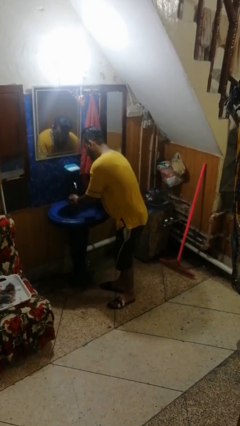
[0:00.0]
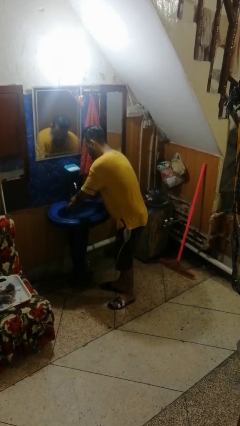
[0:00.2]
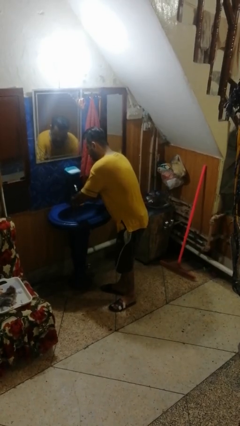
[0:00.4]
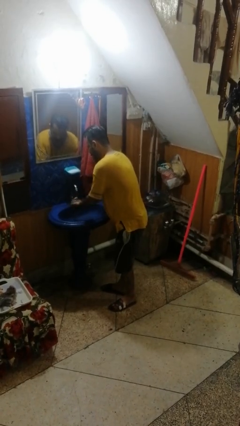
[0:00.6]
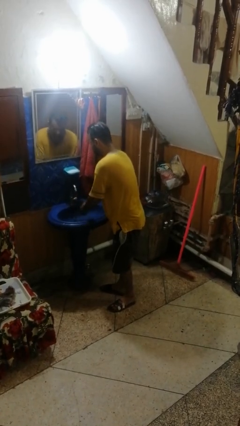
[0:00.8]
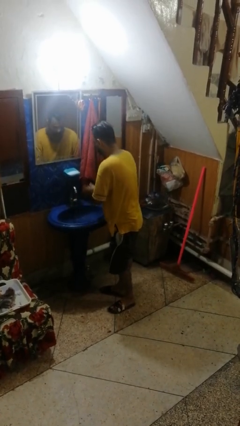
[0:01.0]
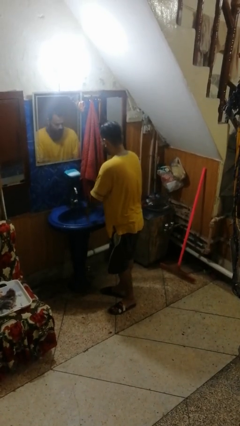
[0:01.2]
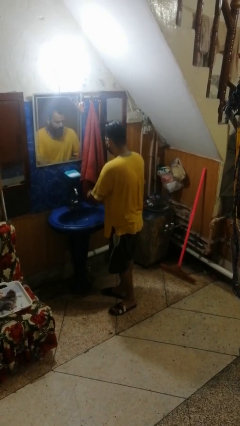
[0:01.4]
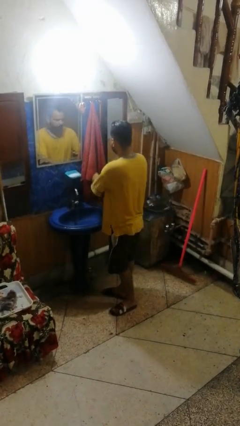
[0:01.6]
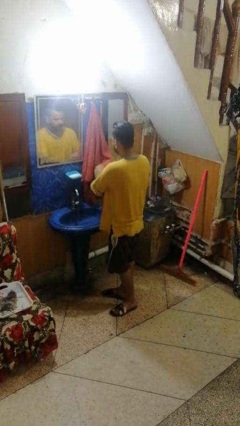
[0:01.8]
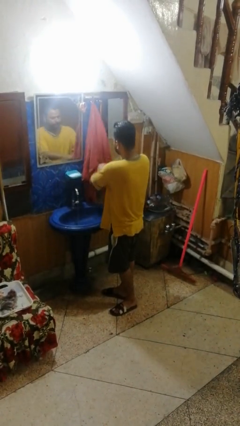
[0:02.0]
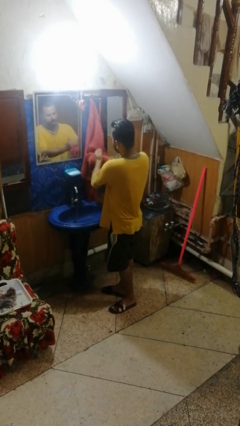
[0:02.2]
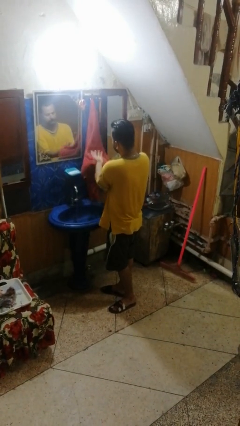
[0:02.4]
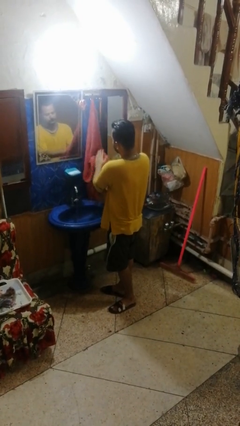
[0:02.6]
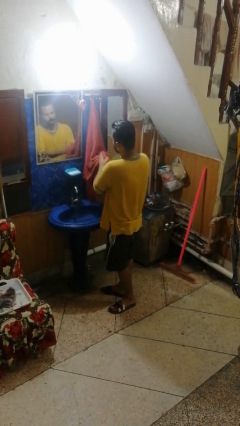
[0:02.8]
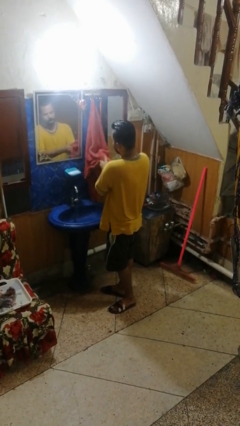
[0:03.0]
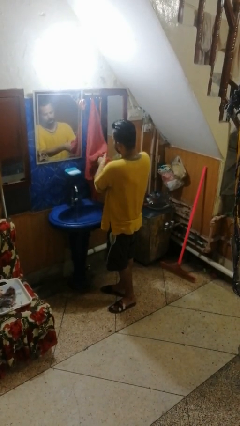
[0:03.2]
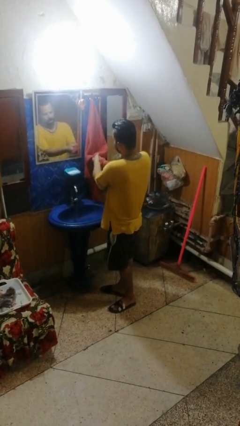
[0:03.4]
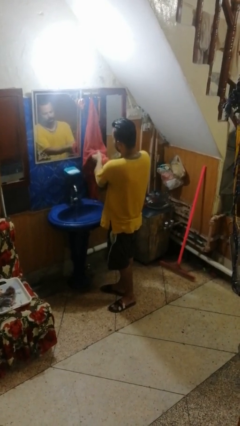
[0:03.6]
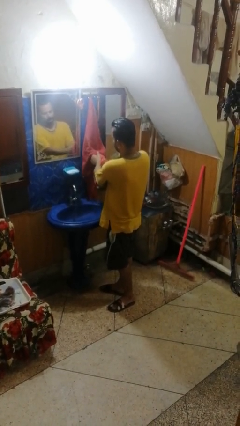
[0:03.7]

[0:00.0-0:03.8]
person dries hands with towel

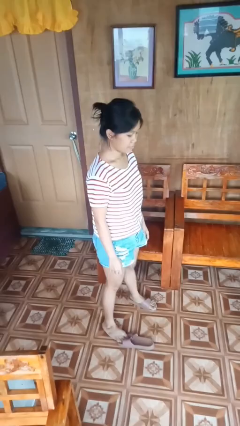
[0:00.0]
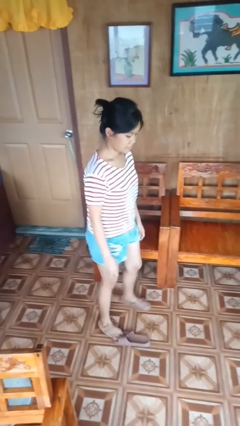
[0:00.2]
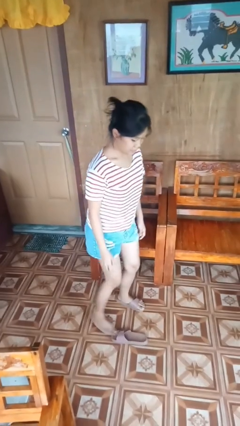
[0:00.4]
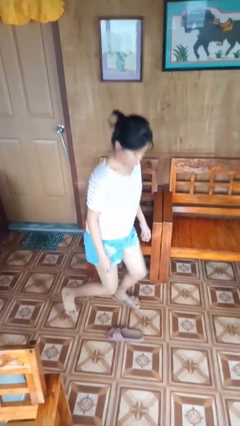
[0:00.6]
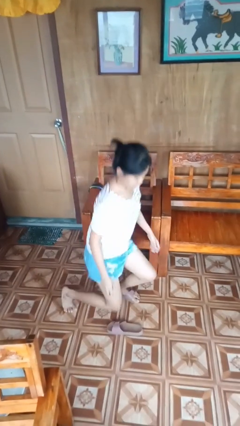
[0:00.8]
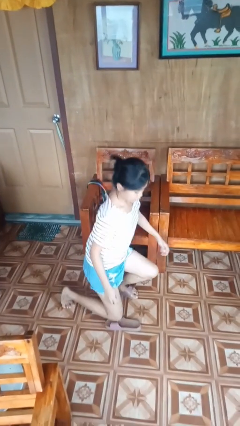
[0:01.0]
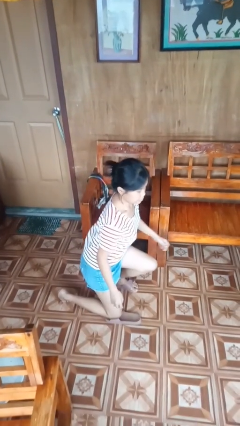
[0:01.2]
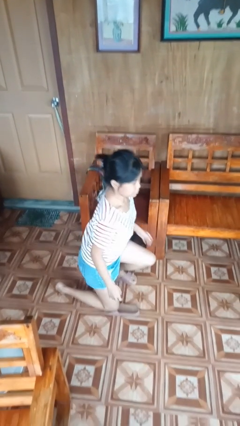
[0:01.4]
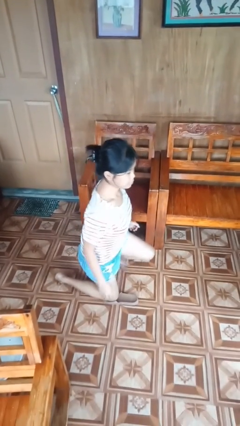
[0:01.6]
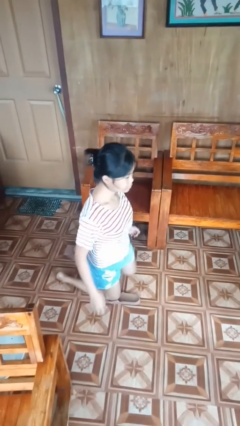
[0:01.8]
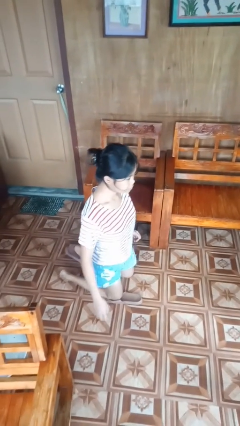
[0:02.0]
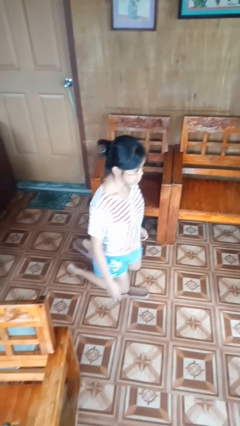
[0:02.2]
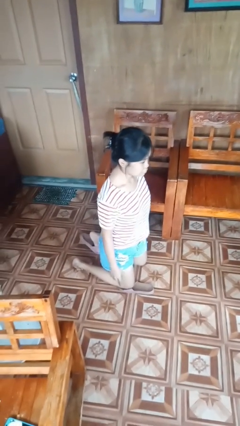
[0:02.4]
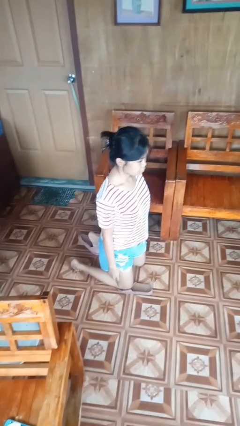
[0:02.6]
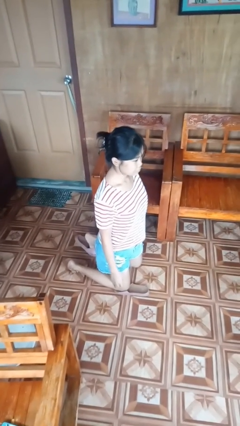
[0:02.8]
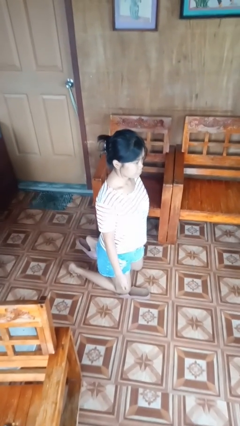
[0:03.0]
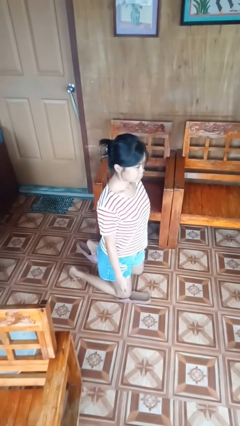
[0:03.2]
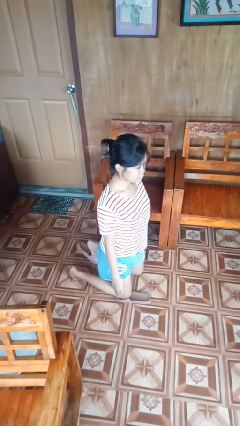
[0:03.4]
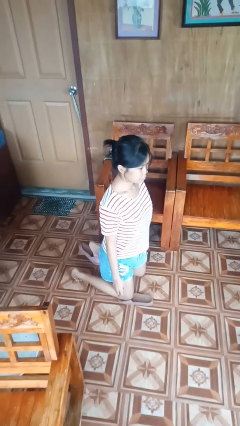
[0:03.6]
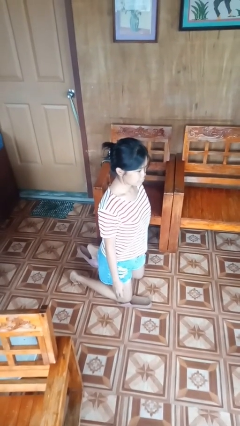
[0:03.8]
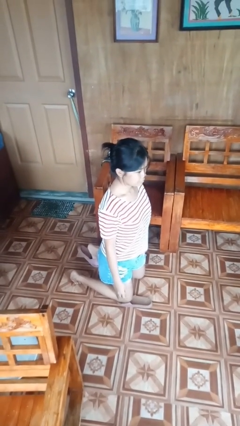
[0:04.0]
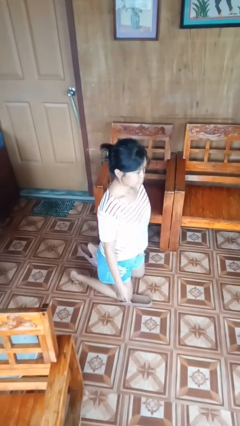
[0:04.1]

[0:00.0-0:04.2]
person kneels

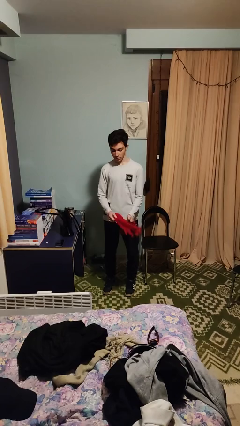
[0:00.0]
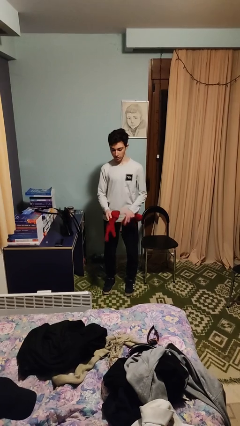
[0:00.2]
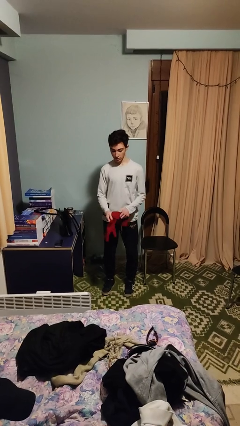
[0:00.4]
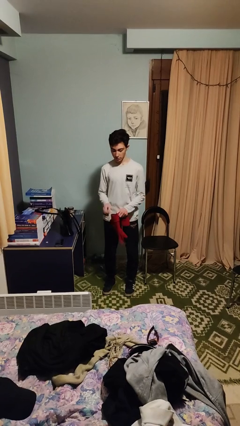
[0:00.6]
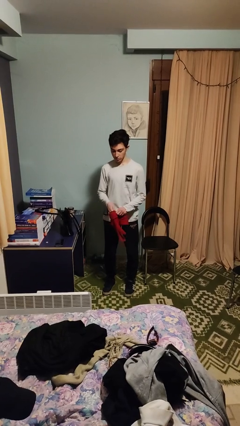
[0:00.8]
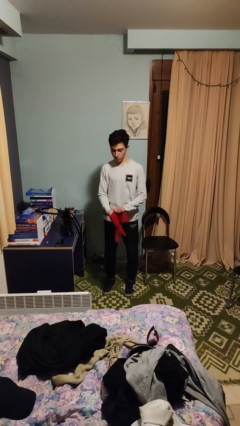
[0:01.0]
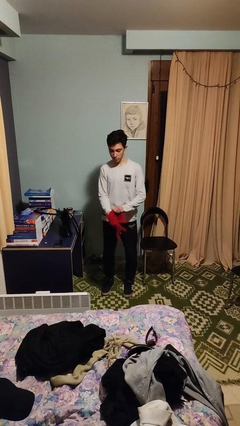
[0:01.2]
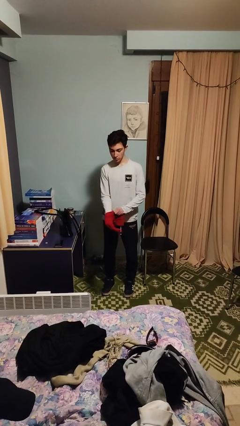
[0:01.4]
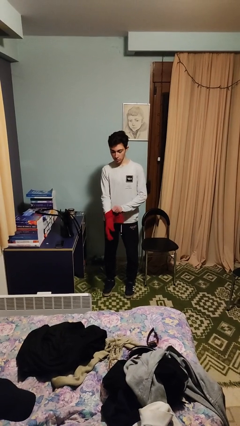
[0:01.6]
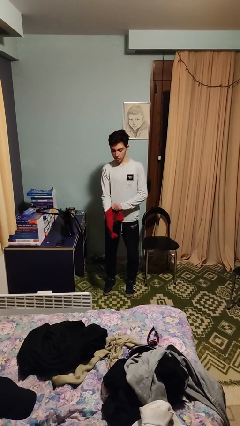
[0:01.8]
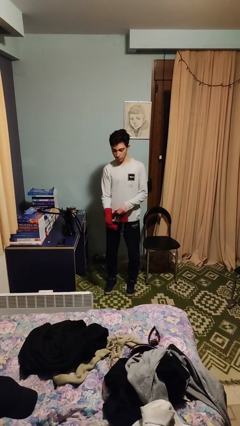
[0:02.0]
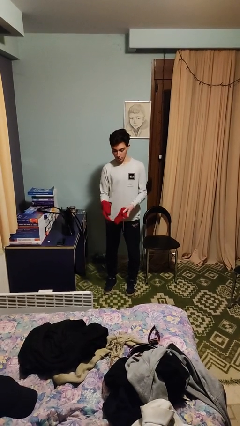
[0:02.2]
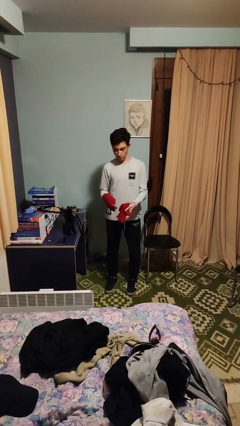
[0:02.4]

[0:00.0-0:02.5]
person puts on gloves

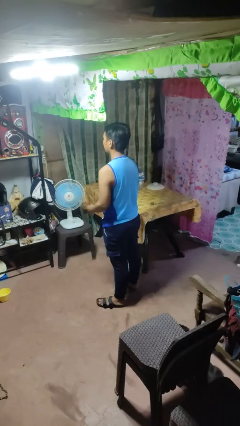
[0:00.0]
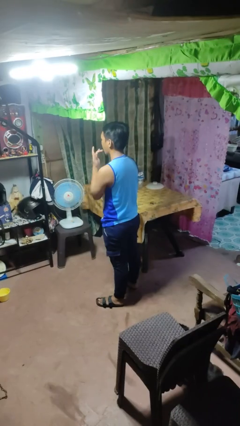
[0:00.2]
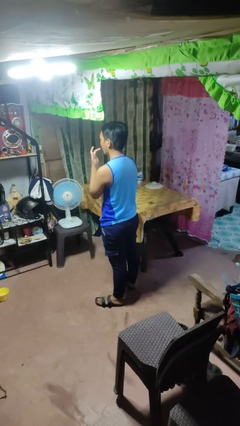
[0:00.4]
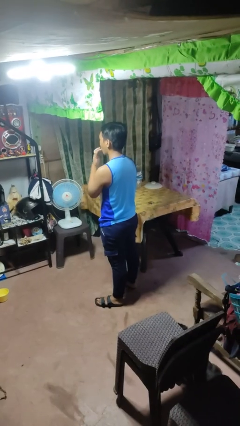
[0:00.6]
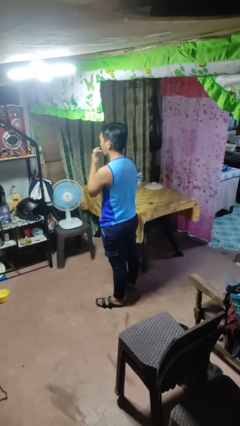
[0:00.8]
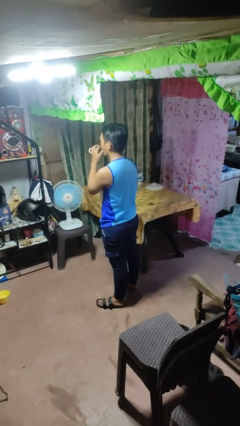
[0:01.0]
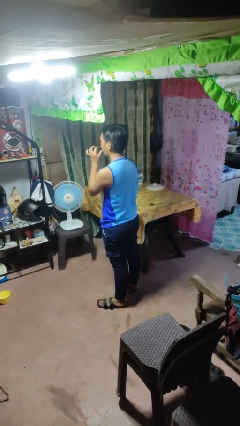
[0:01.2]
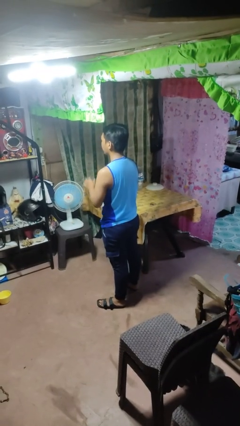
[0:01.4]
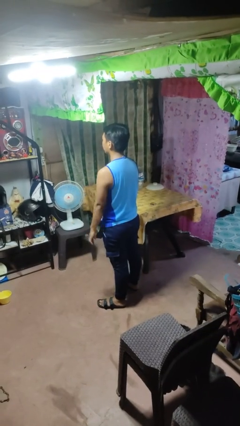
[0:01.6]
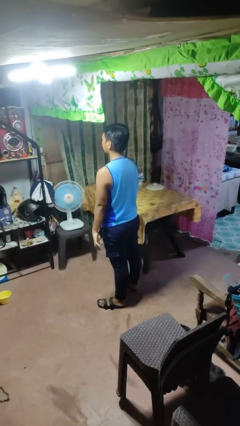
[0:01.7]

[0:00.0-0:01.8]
person licks fingers

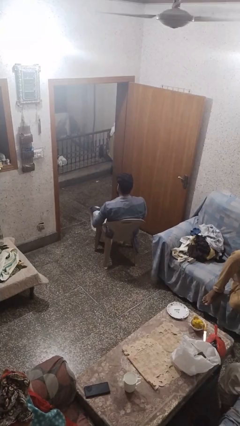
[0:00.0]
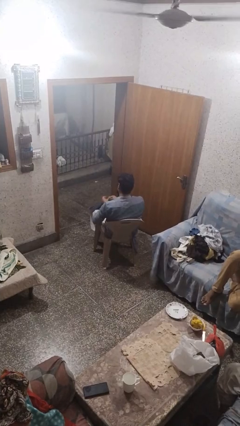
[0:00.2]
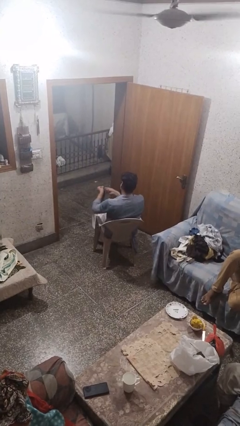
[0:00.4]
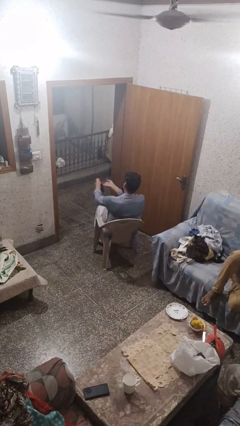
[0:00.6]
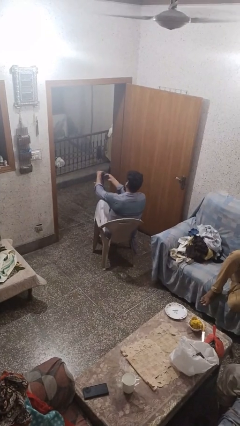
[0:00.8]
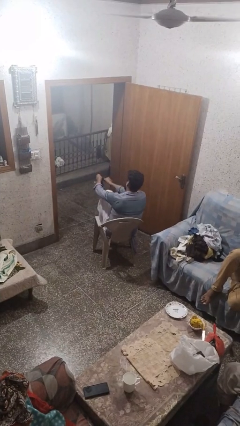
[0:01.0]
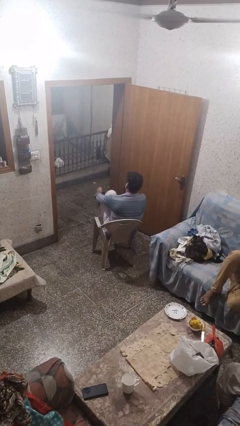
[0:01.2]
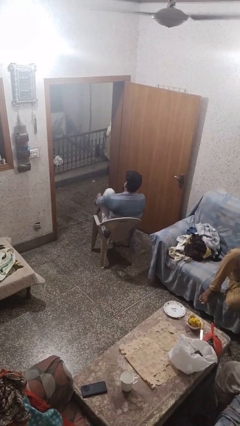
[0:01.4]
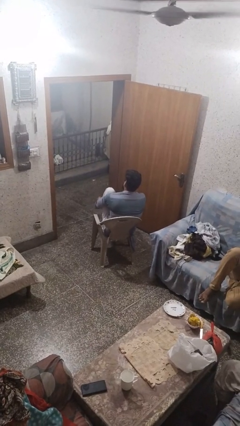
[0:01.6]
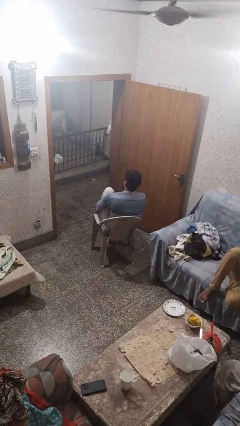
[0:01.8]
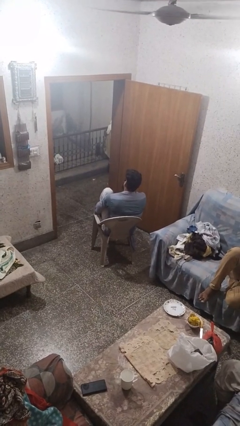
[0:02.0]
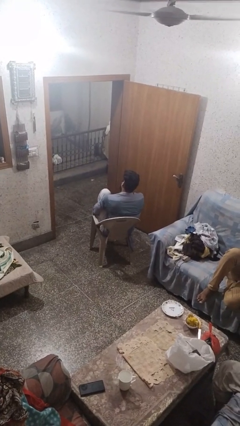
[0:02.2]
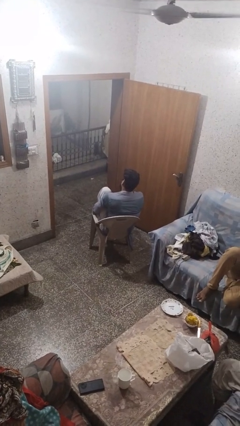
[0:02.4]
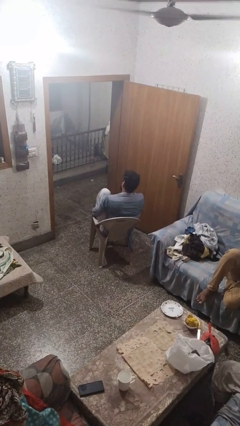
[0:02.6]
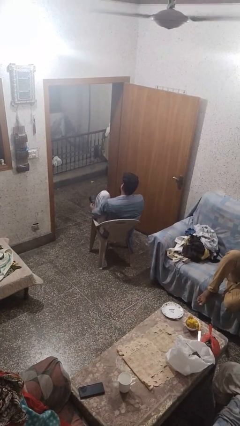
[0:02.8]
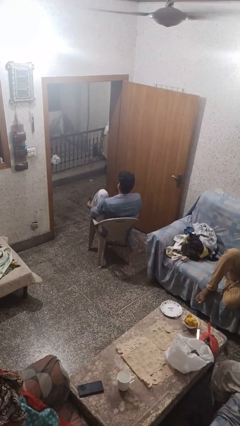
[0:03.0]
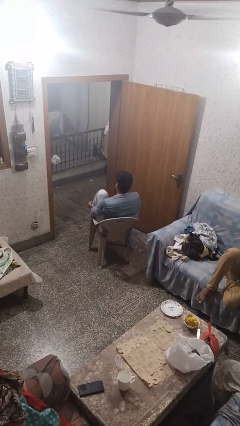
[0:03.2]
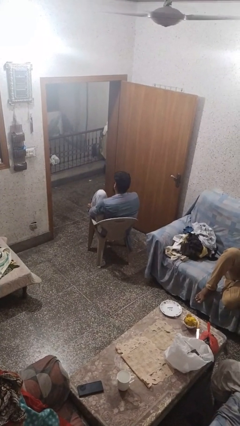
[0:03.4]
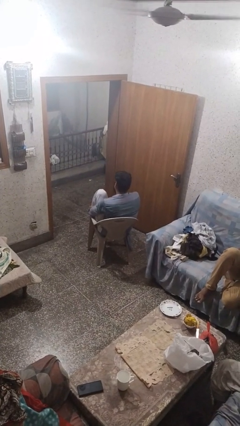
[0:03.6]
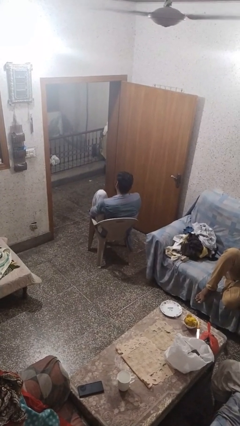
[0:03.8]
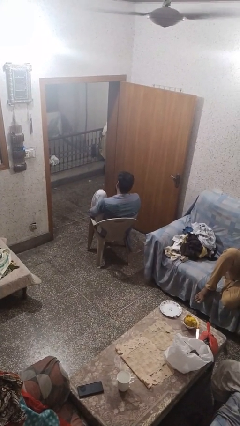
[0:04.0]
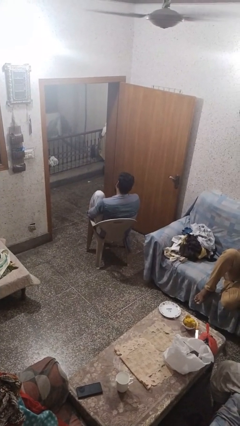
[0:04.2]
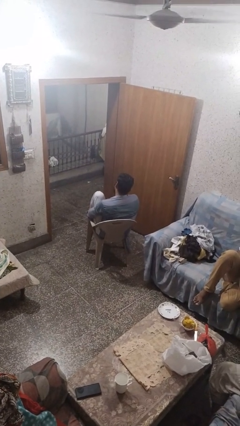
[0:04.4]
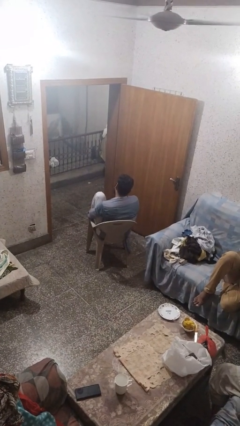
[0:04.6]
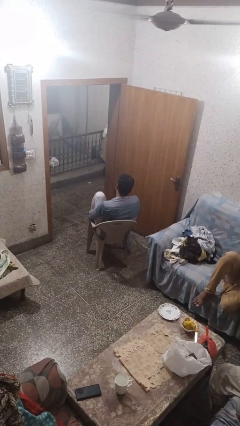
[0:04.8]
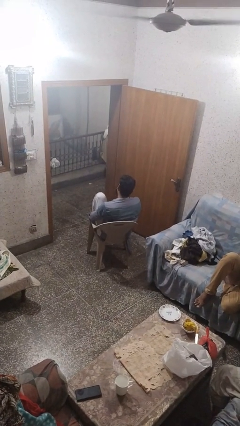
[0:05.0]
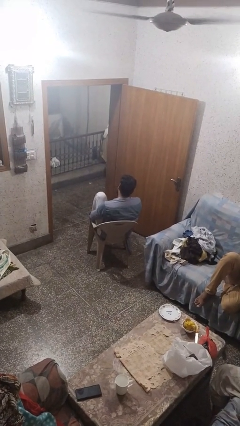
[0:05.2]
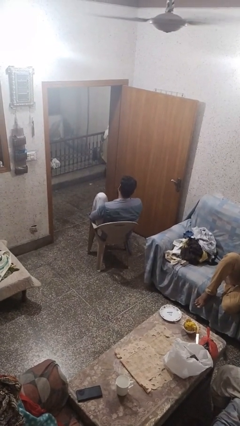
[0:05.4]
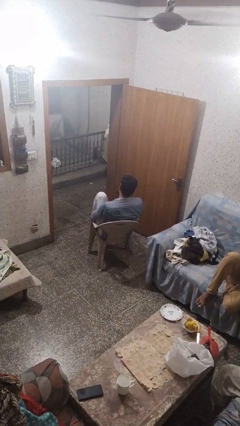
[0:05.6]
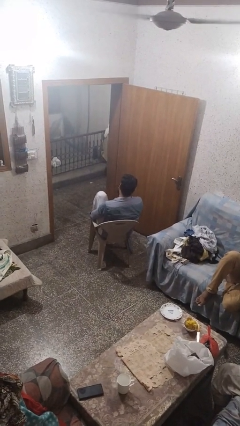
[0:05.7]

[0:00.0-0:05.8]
person puts on socks
